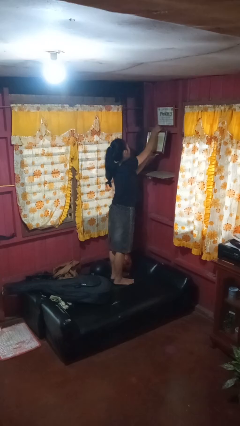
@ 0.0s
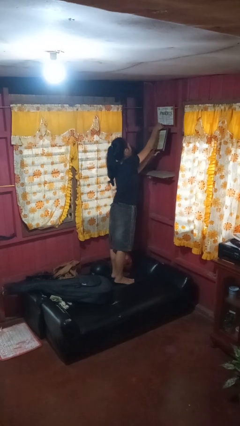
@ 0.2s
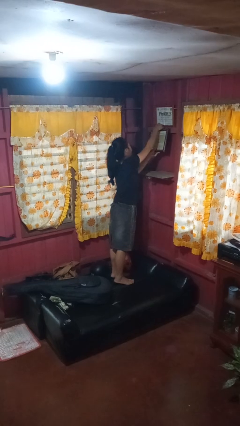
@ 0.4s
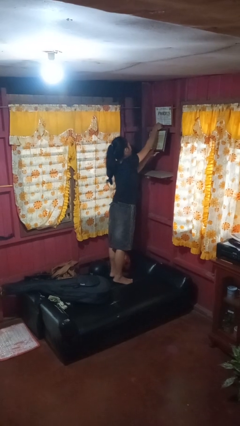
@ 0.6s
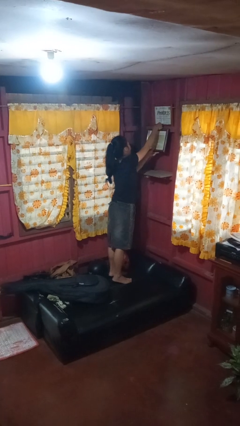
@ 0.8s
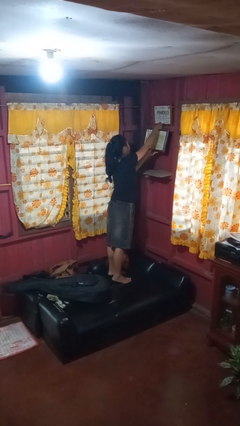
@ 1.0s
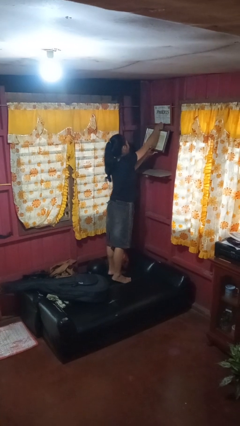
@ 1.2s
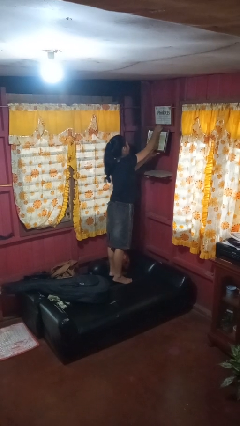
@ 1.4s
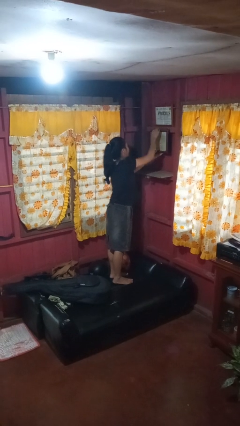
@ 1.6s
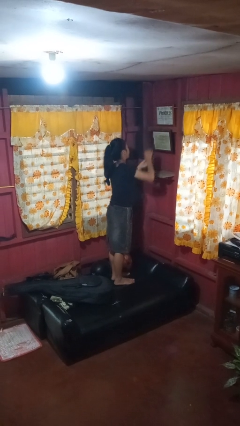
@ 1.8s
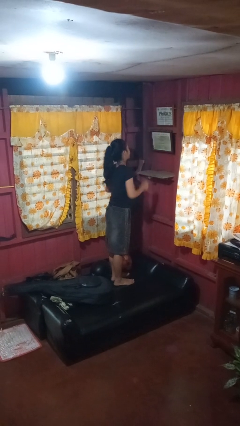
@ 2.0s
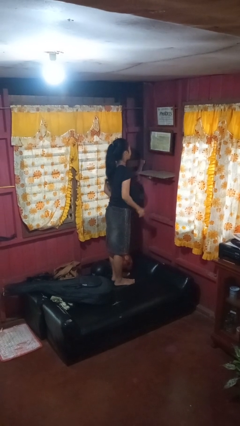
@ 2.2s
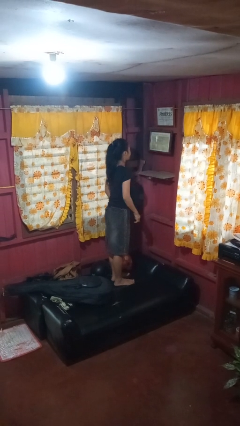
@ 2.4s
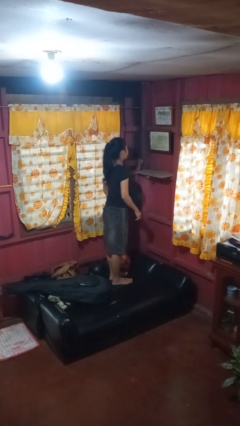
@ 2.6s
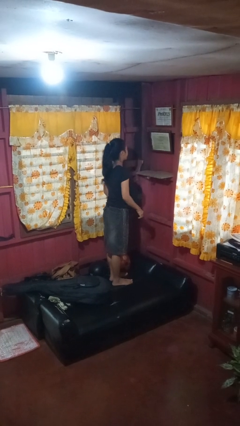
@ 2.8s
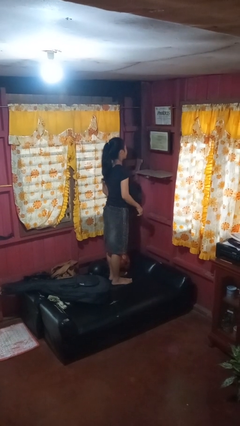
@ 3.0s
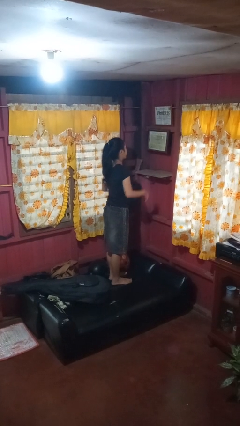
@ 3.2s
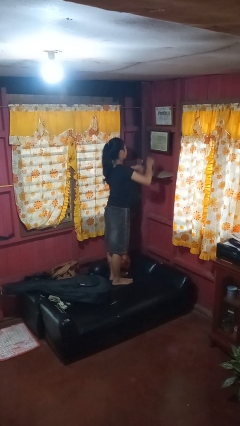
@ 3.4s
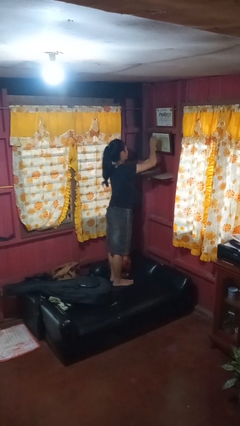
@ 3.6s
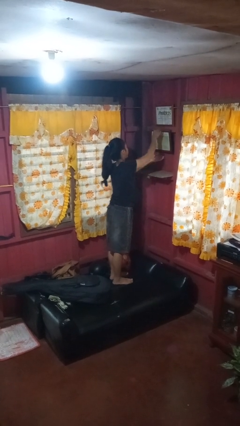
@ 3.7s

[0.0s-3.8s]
person puts up picture frame

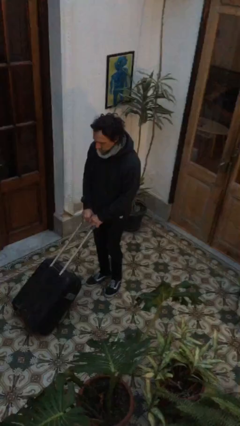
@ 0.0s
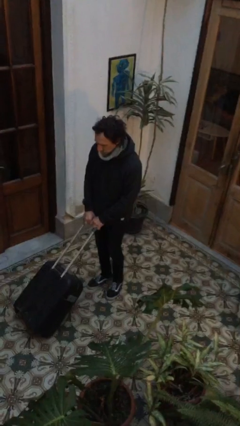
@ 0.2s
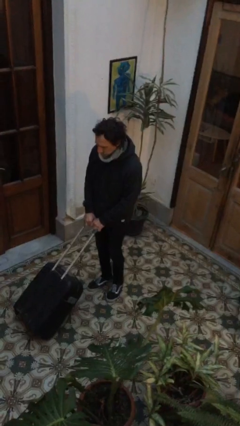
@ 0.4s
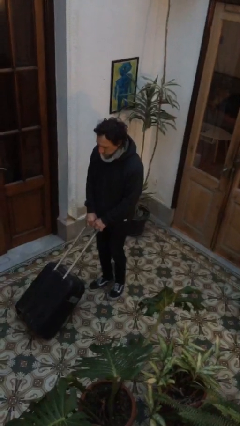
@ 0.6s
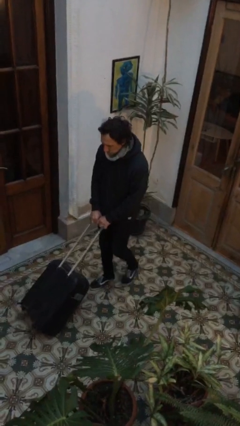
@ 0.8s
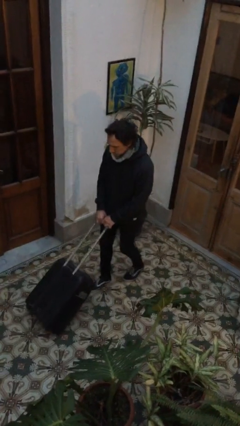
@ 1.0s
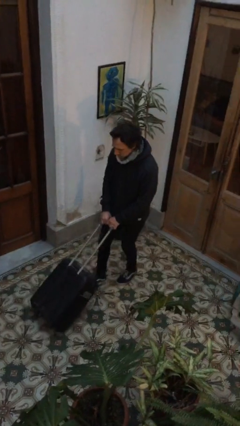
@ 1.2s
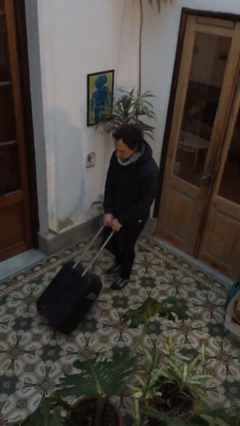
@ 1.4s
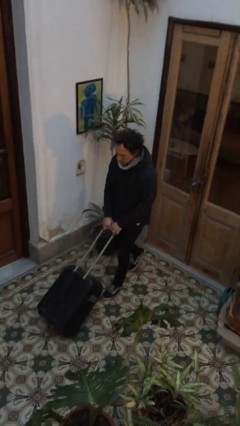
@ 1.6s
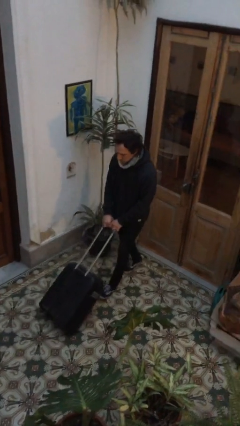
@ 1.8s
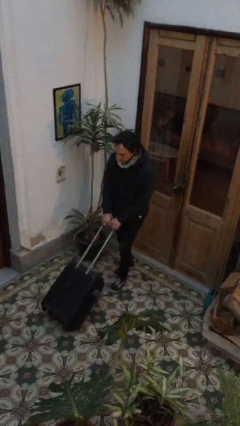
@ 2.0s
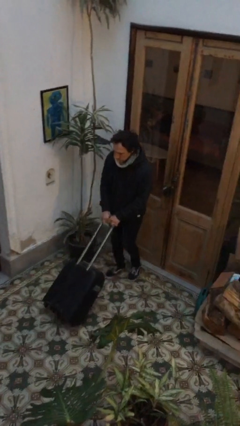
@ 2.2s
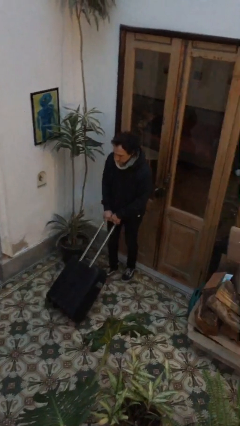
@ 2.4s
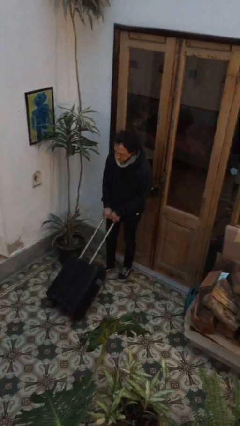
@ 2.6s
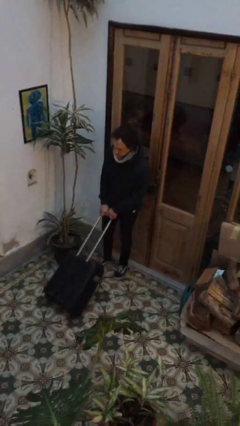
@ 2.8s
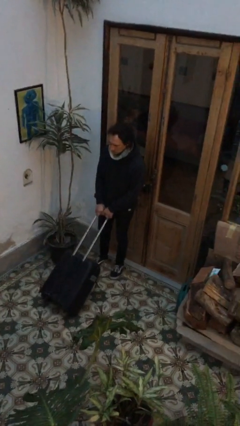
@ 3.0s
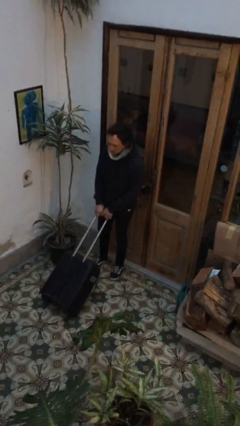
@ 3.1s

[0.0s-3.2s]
person pulls wheeled cart

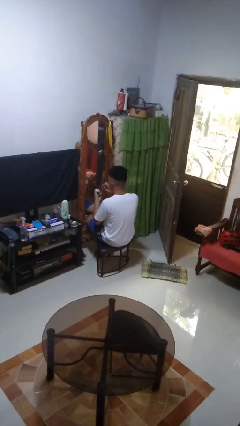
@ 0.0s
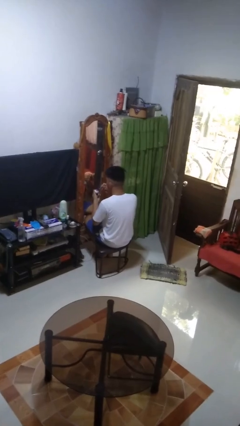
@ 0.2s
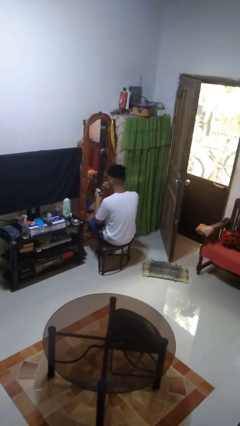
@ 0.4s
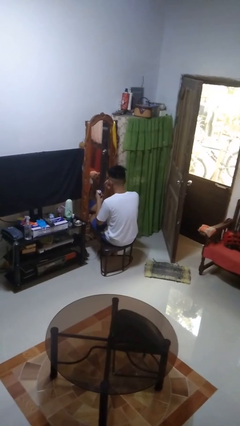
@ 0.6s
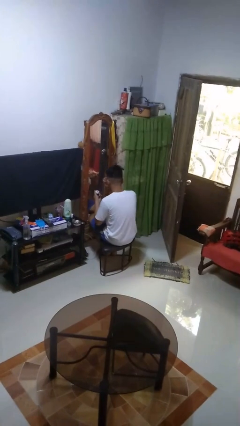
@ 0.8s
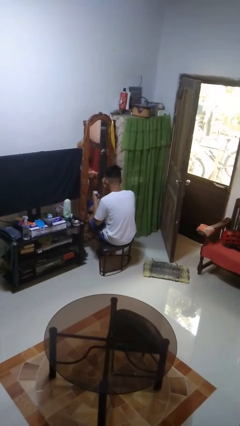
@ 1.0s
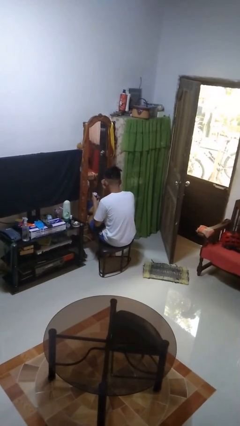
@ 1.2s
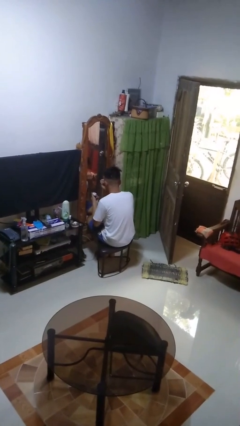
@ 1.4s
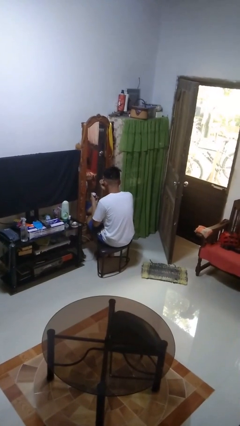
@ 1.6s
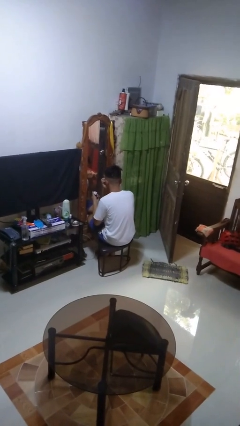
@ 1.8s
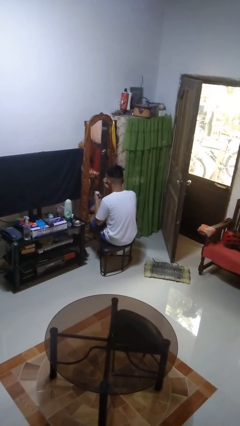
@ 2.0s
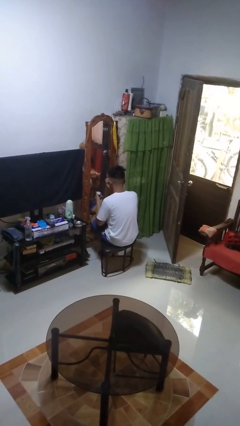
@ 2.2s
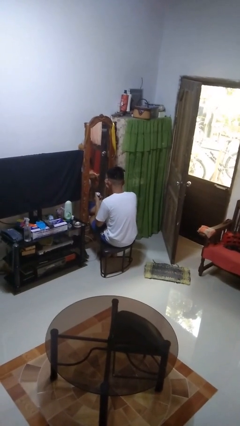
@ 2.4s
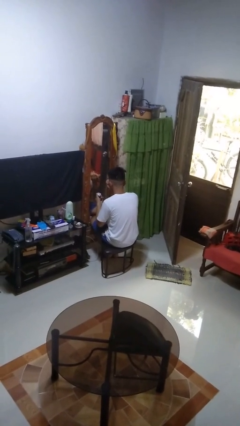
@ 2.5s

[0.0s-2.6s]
person applies eye makeup

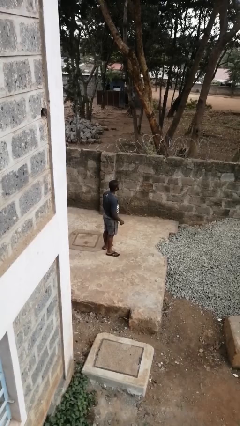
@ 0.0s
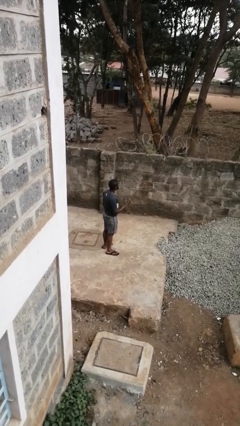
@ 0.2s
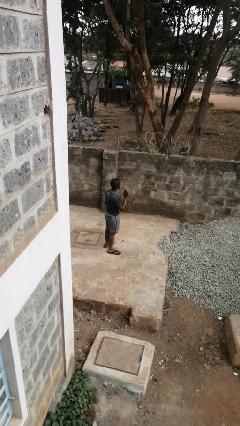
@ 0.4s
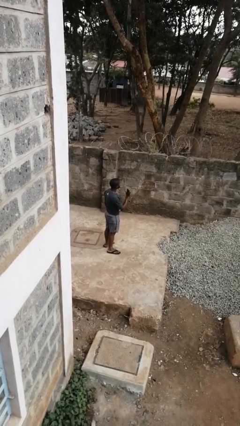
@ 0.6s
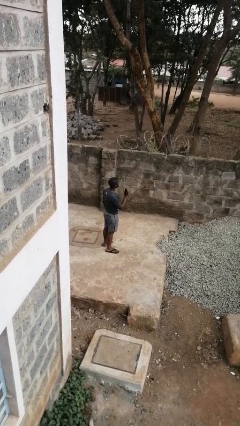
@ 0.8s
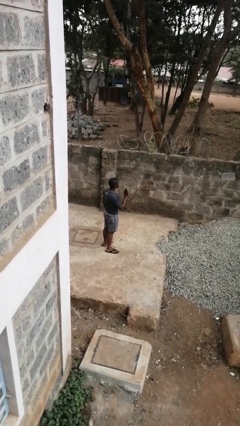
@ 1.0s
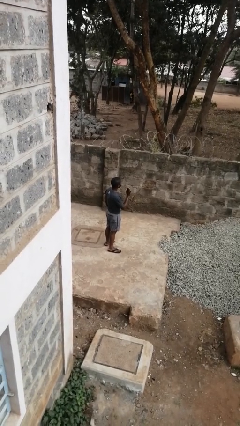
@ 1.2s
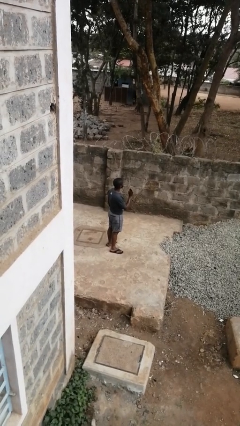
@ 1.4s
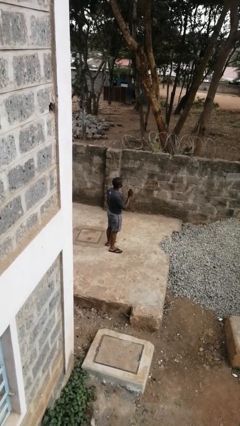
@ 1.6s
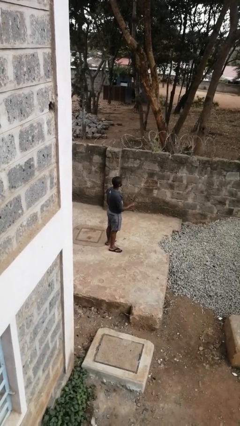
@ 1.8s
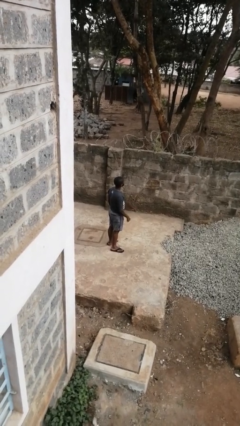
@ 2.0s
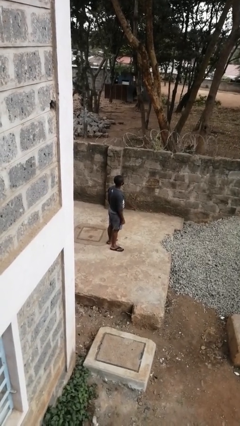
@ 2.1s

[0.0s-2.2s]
person gestures stop

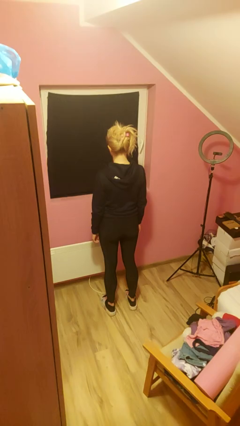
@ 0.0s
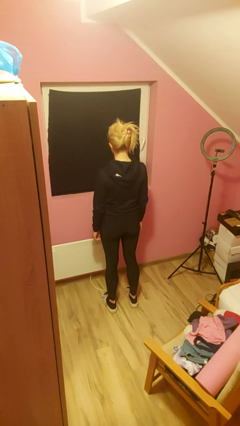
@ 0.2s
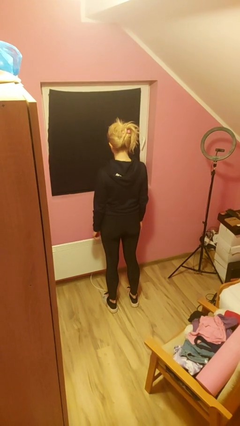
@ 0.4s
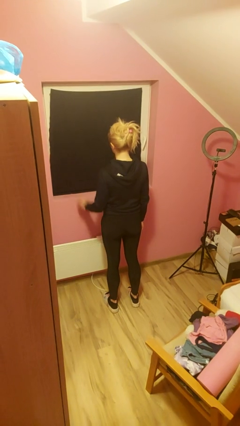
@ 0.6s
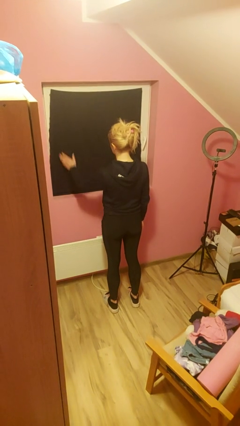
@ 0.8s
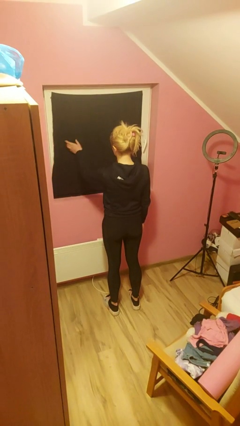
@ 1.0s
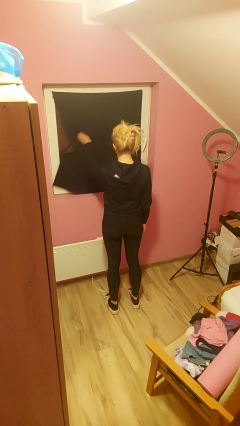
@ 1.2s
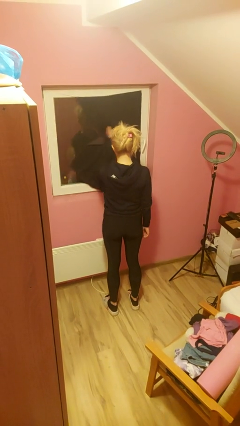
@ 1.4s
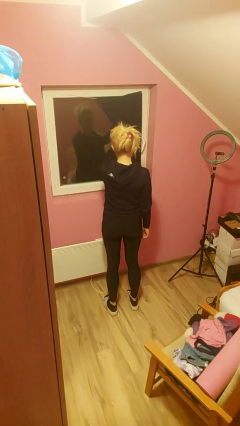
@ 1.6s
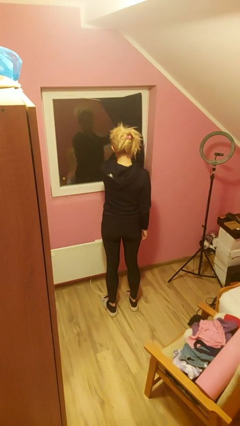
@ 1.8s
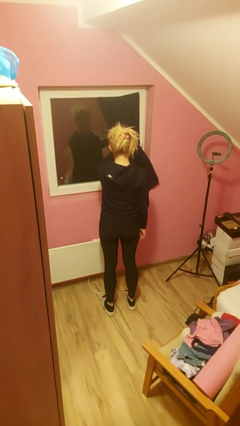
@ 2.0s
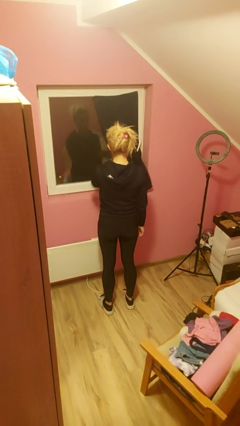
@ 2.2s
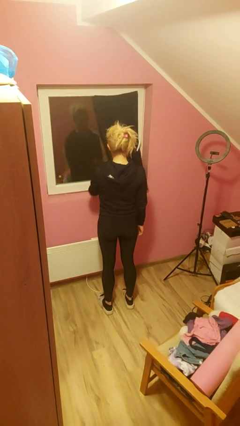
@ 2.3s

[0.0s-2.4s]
person opens curtains

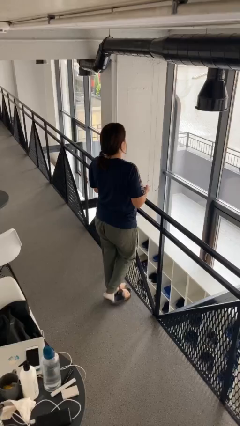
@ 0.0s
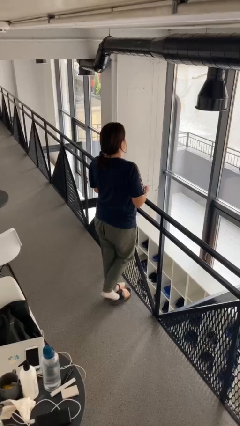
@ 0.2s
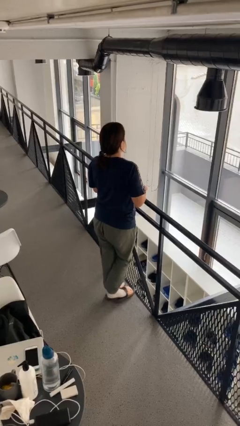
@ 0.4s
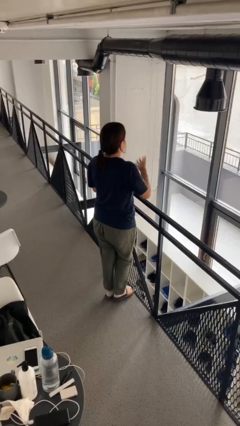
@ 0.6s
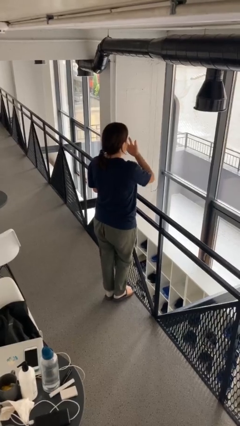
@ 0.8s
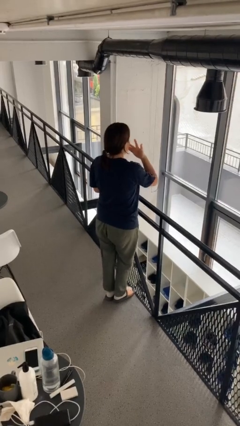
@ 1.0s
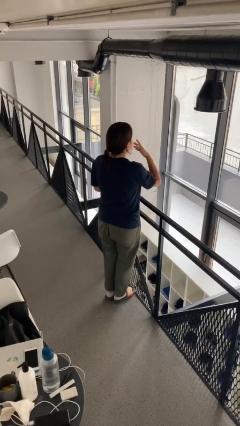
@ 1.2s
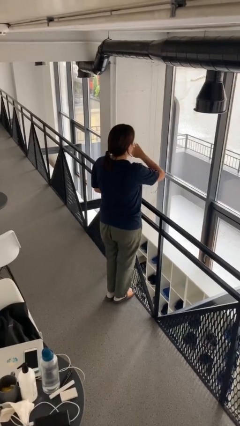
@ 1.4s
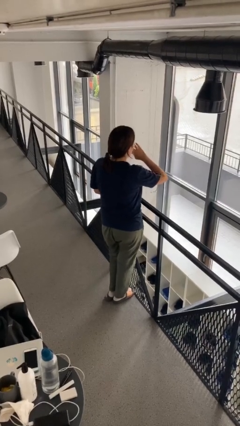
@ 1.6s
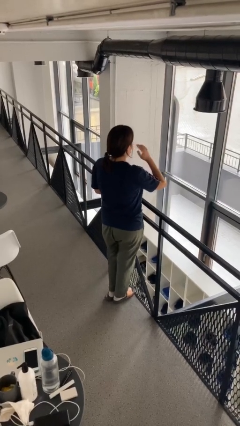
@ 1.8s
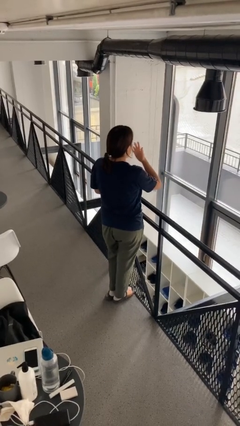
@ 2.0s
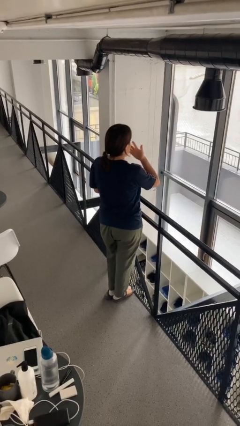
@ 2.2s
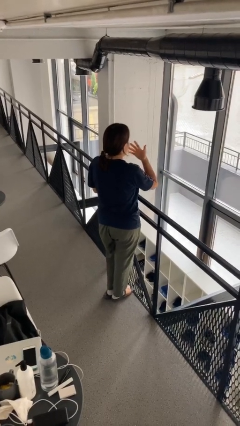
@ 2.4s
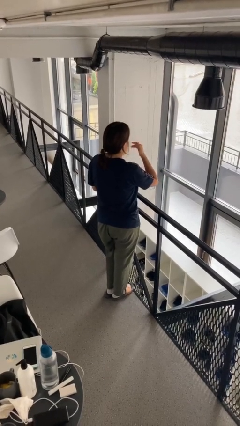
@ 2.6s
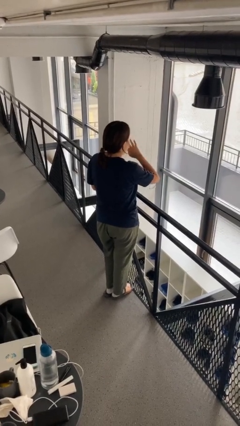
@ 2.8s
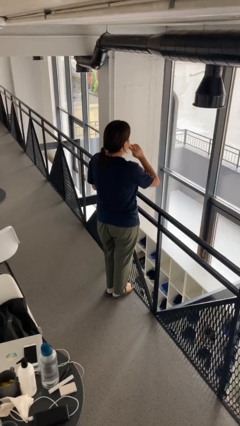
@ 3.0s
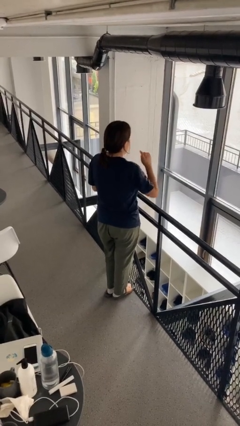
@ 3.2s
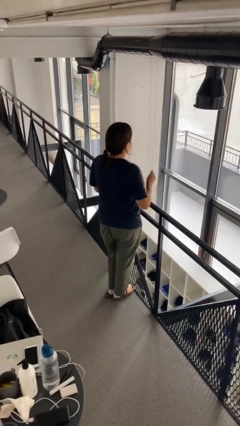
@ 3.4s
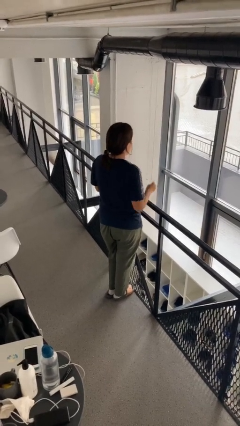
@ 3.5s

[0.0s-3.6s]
person licks fingers
